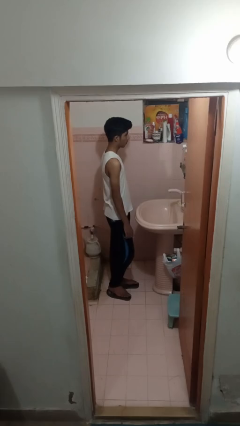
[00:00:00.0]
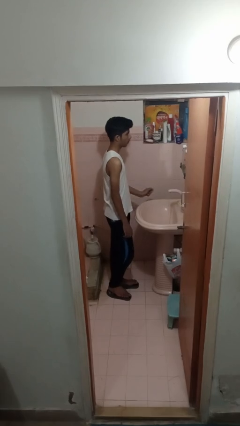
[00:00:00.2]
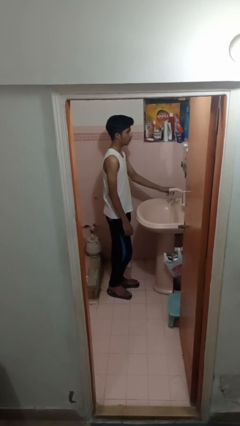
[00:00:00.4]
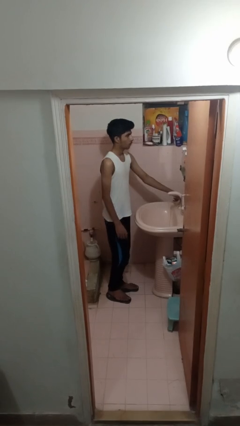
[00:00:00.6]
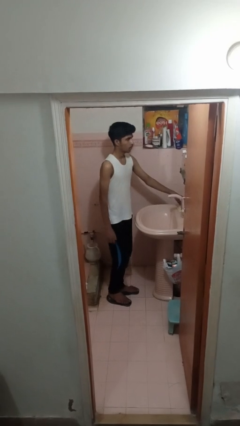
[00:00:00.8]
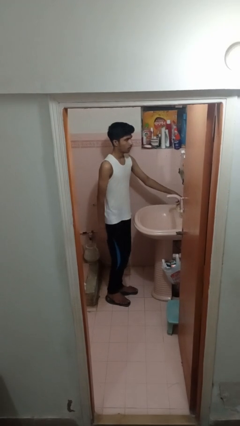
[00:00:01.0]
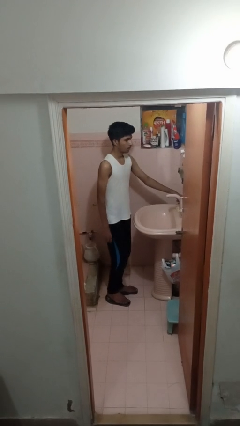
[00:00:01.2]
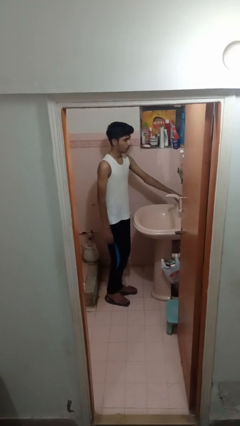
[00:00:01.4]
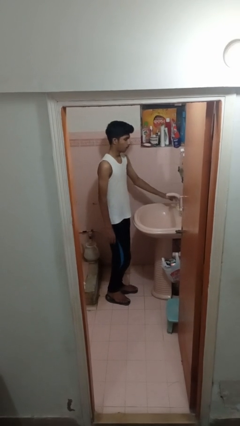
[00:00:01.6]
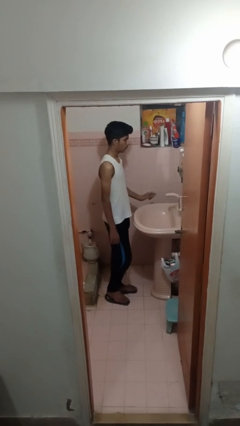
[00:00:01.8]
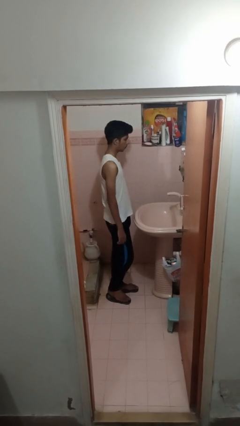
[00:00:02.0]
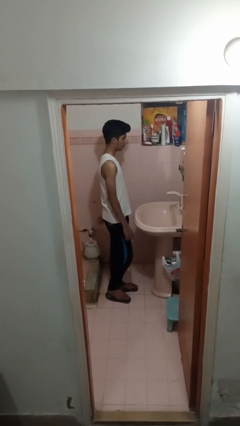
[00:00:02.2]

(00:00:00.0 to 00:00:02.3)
person turns off faucet

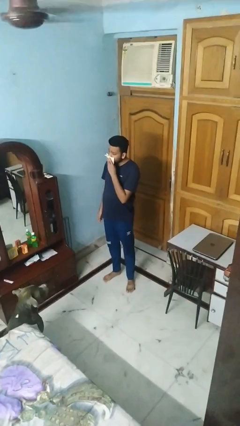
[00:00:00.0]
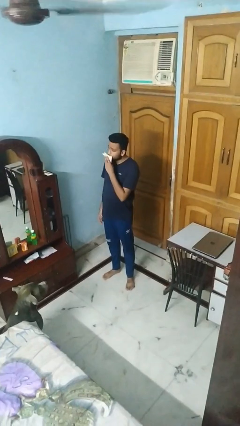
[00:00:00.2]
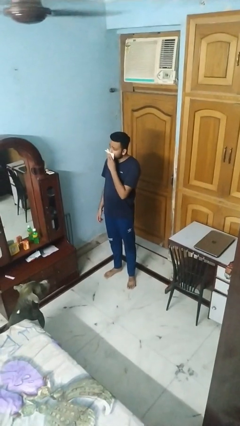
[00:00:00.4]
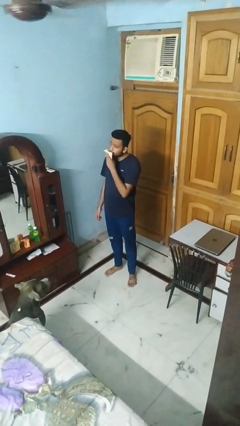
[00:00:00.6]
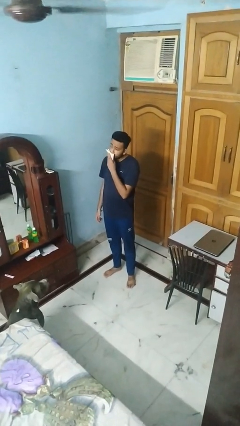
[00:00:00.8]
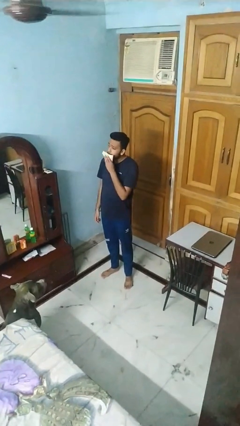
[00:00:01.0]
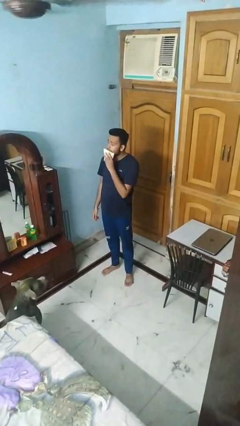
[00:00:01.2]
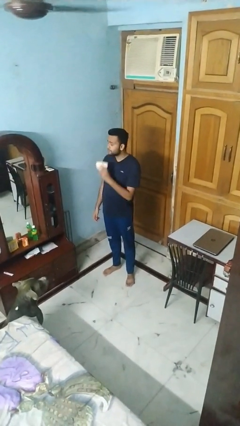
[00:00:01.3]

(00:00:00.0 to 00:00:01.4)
person wipes mouth with napkin

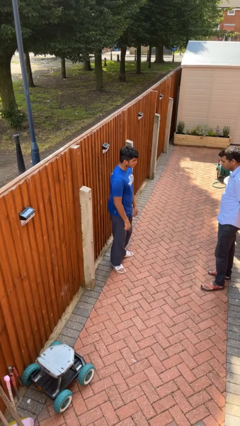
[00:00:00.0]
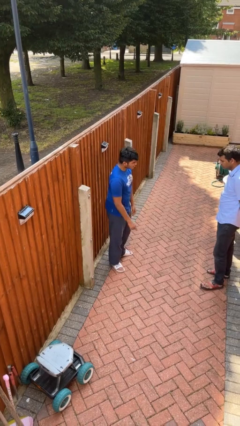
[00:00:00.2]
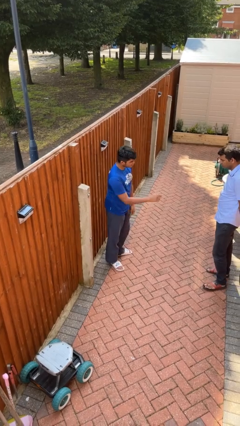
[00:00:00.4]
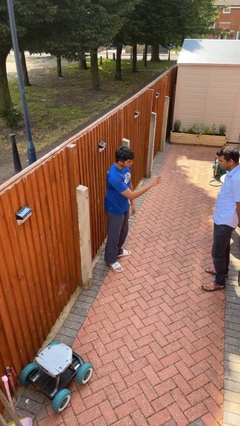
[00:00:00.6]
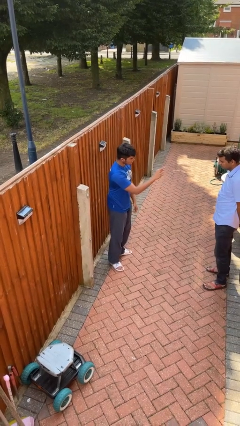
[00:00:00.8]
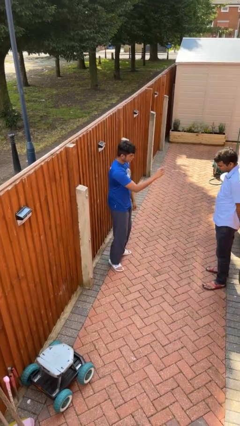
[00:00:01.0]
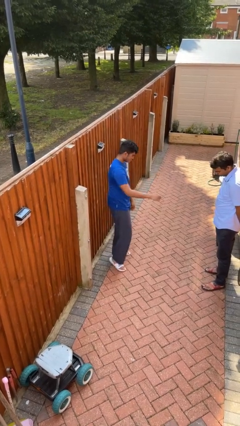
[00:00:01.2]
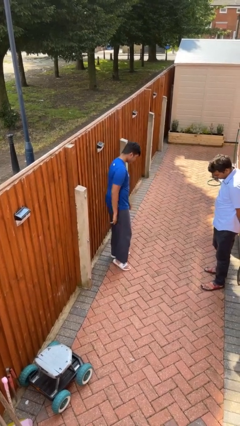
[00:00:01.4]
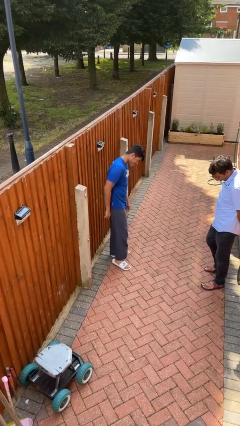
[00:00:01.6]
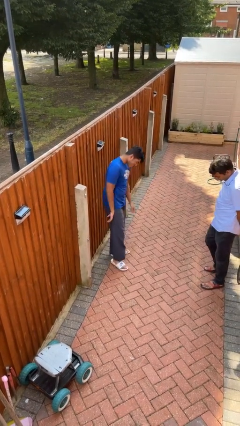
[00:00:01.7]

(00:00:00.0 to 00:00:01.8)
person laughs with person

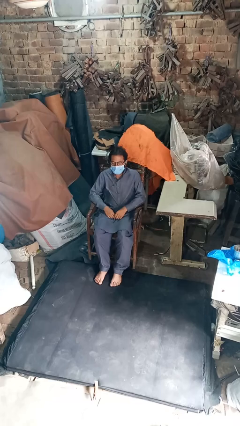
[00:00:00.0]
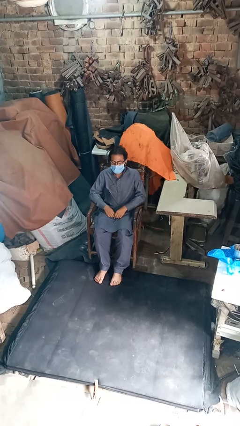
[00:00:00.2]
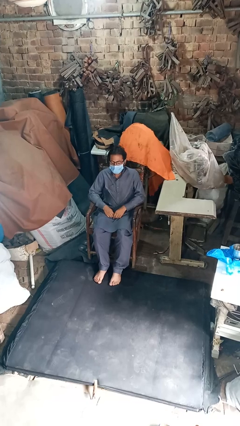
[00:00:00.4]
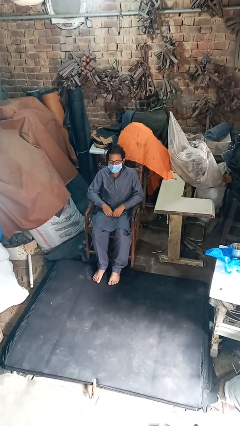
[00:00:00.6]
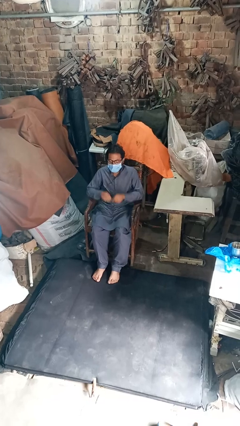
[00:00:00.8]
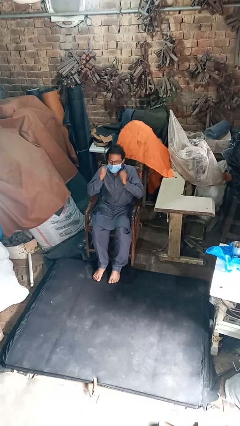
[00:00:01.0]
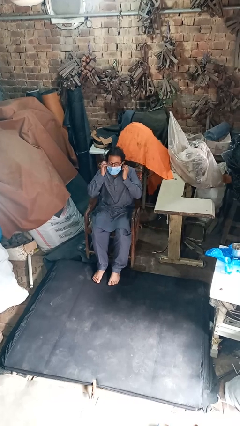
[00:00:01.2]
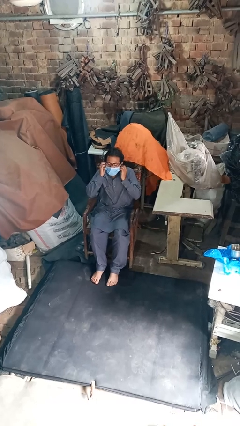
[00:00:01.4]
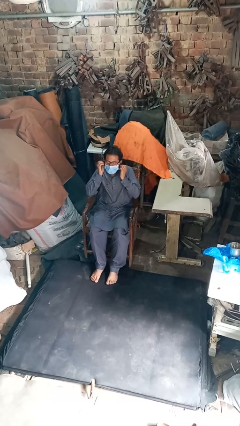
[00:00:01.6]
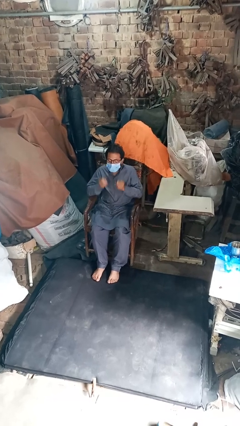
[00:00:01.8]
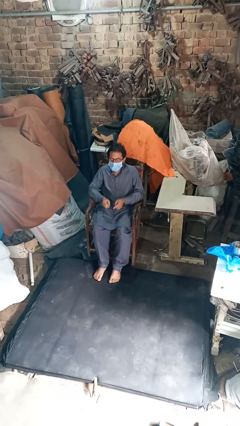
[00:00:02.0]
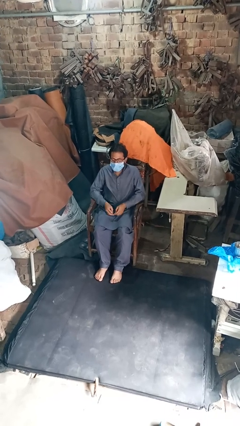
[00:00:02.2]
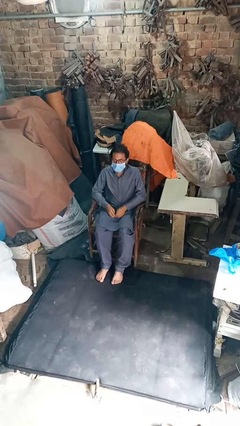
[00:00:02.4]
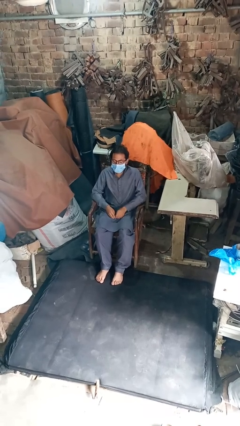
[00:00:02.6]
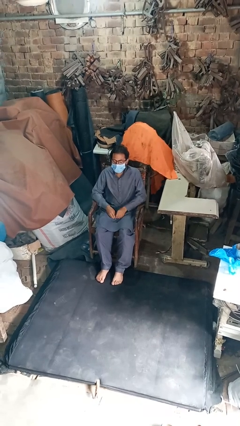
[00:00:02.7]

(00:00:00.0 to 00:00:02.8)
person takes off headphones

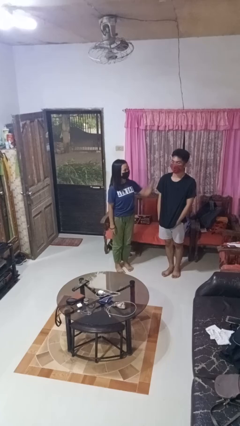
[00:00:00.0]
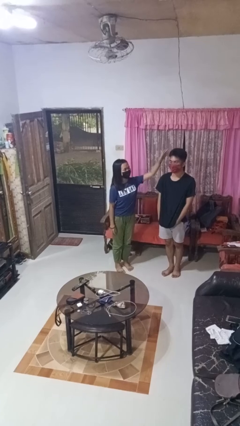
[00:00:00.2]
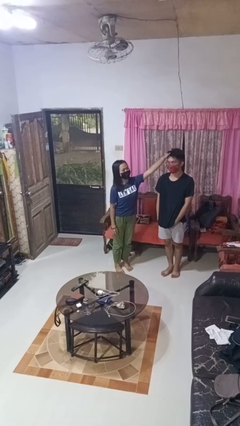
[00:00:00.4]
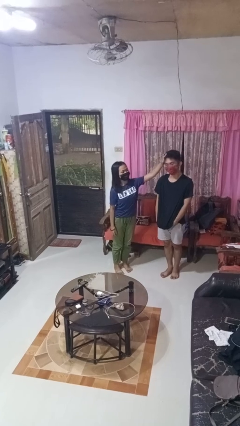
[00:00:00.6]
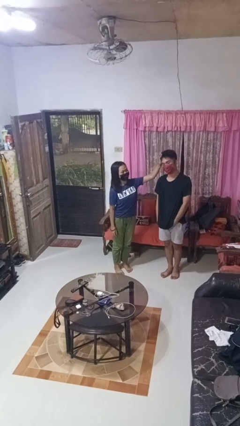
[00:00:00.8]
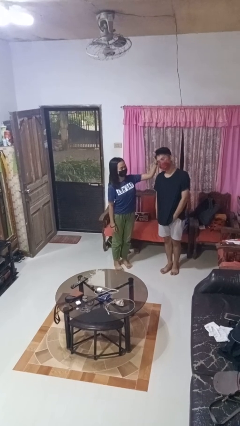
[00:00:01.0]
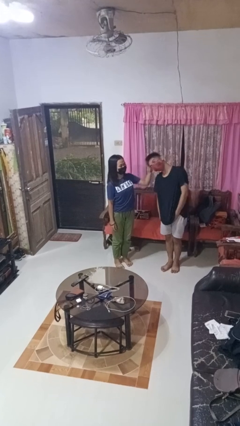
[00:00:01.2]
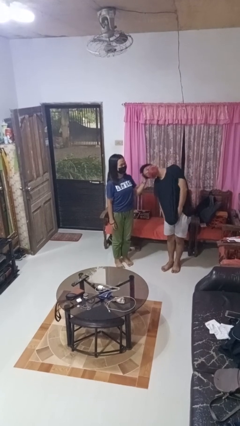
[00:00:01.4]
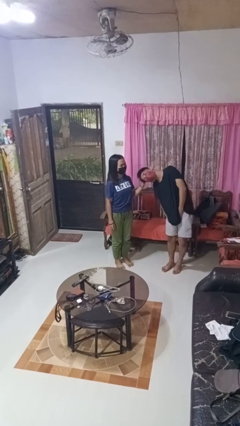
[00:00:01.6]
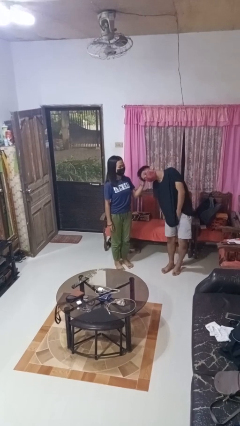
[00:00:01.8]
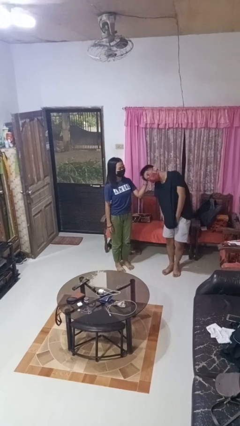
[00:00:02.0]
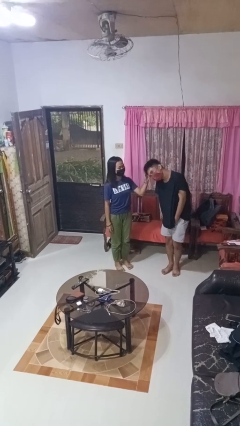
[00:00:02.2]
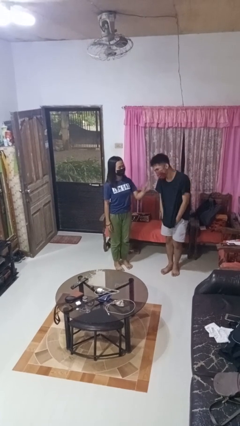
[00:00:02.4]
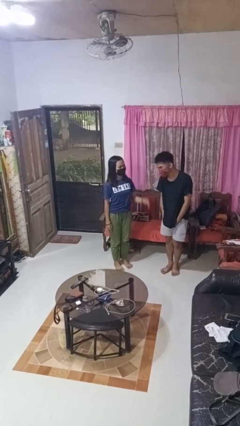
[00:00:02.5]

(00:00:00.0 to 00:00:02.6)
person grabs person by hair

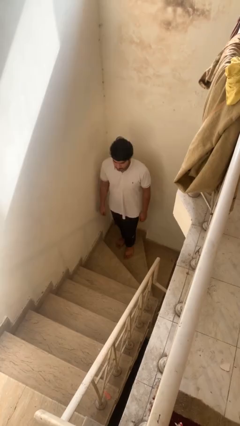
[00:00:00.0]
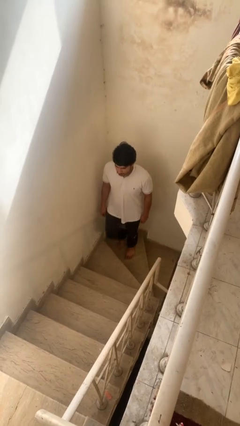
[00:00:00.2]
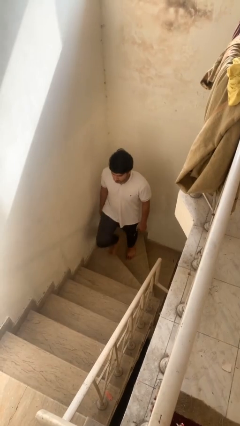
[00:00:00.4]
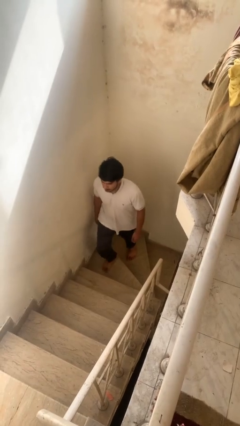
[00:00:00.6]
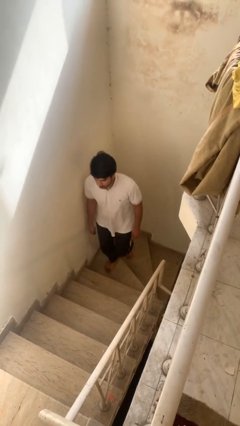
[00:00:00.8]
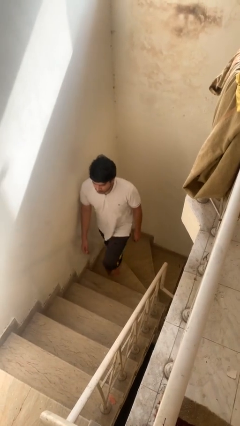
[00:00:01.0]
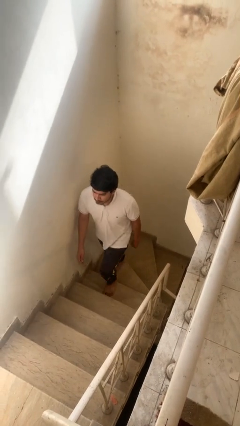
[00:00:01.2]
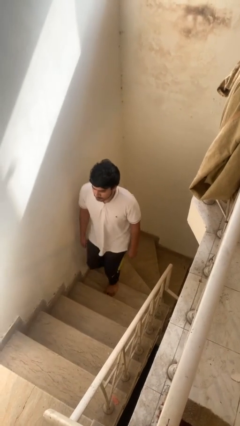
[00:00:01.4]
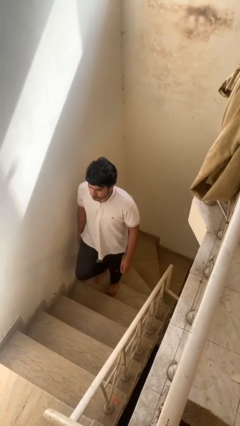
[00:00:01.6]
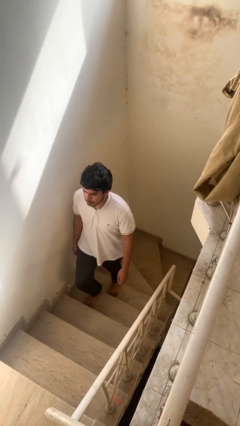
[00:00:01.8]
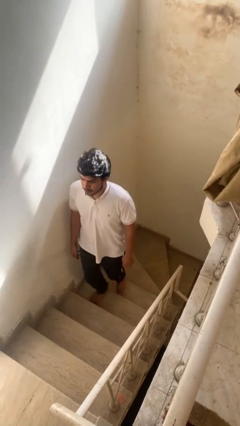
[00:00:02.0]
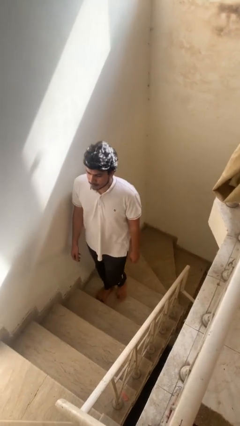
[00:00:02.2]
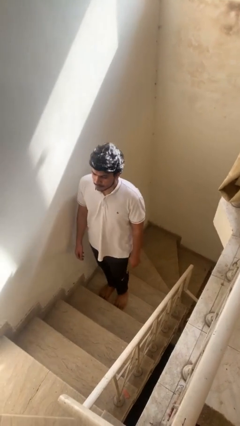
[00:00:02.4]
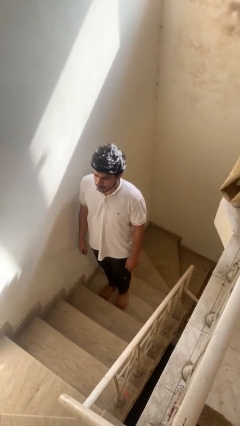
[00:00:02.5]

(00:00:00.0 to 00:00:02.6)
person climbs up stairs

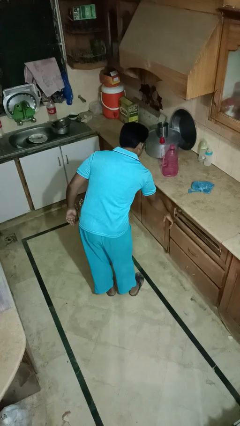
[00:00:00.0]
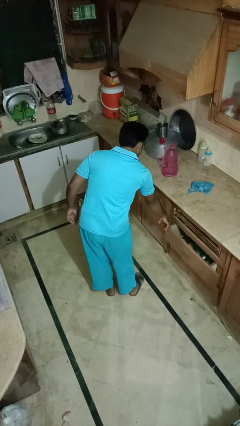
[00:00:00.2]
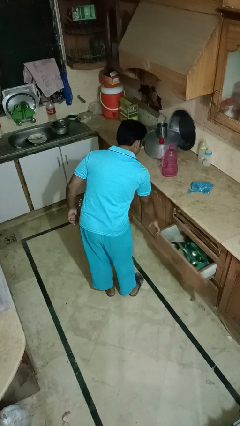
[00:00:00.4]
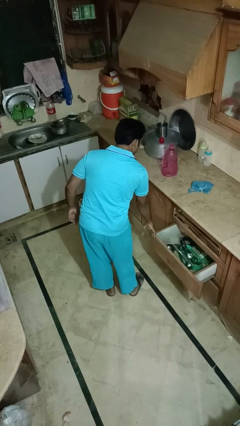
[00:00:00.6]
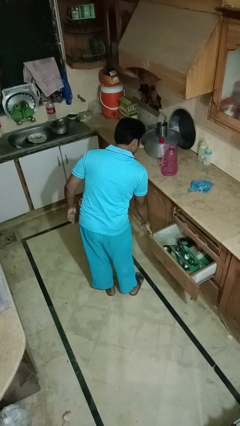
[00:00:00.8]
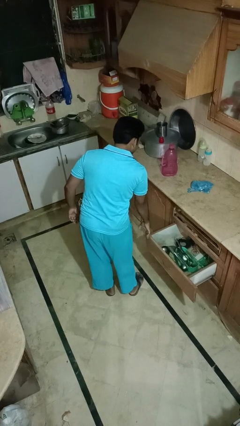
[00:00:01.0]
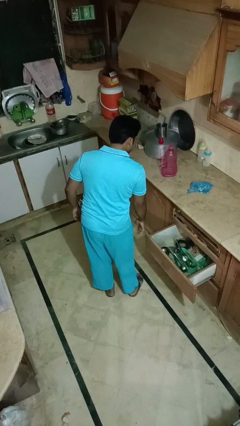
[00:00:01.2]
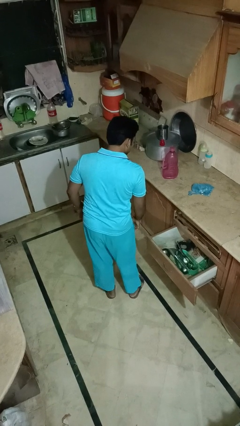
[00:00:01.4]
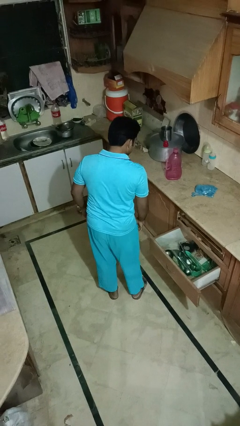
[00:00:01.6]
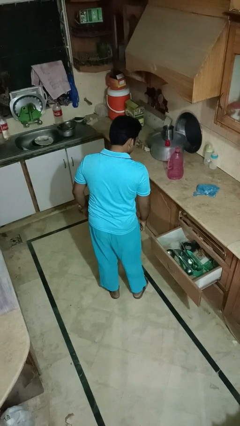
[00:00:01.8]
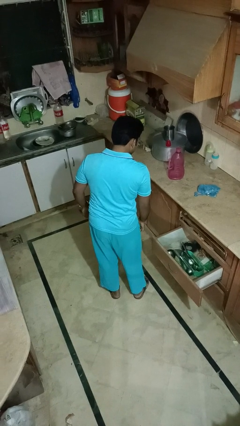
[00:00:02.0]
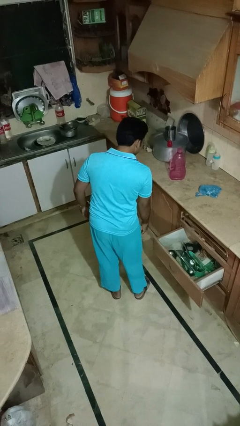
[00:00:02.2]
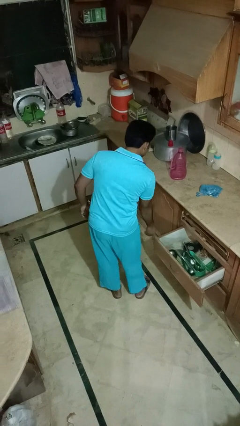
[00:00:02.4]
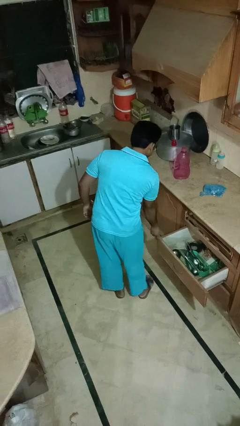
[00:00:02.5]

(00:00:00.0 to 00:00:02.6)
person opens kitchen drawer

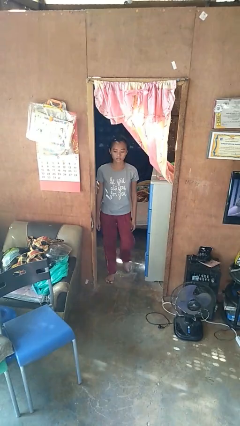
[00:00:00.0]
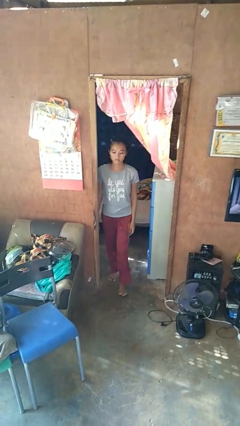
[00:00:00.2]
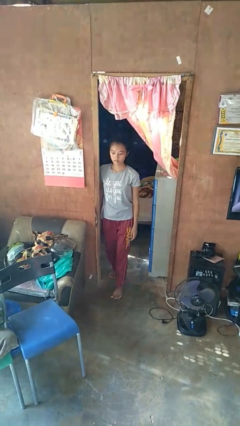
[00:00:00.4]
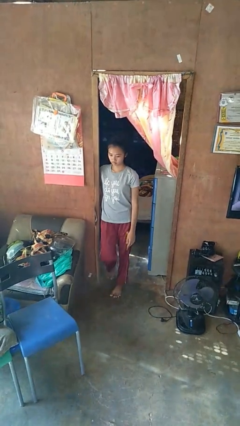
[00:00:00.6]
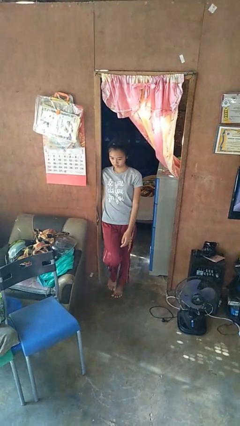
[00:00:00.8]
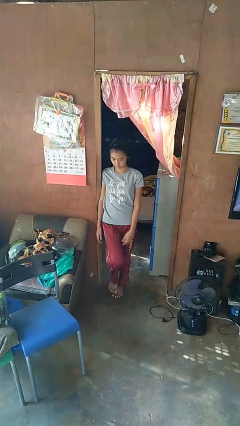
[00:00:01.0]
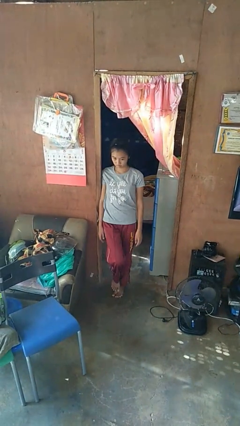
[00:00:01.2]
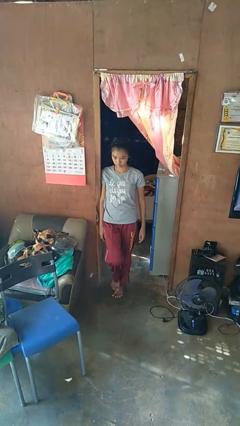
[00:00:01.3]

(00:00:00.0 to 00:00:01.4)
person bumps into wall
